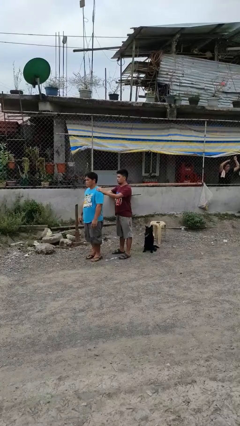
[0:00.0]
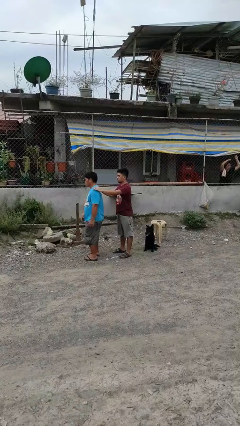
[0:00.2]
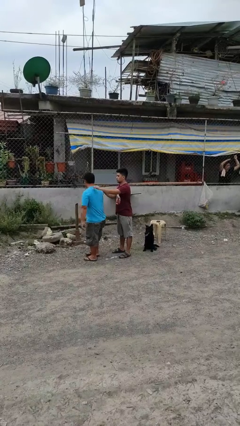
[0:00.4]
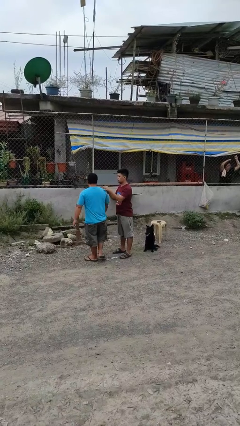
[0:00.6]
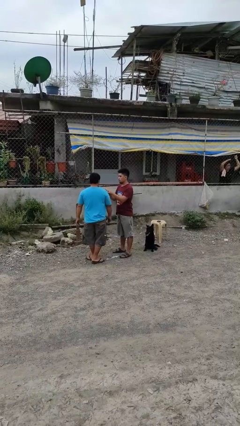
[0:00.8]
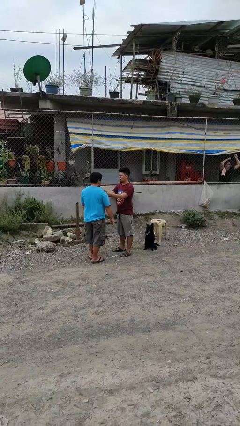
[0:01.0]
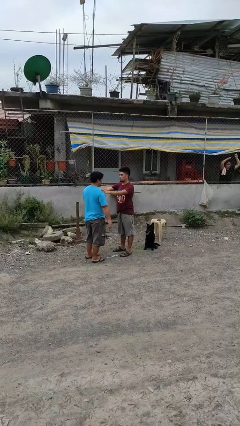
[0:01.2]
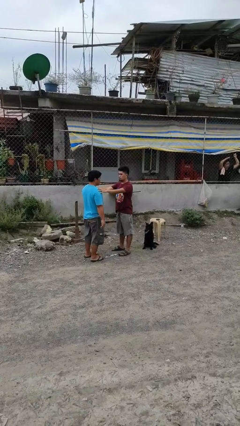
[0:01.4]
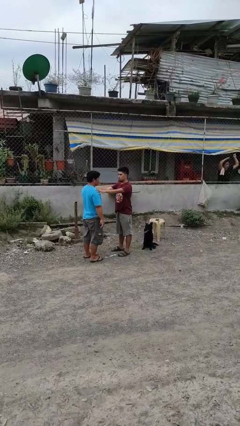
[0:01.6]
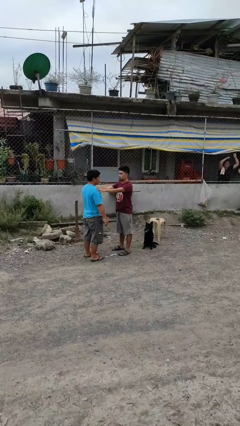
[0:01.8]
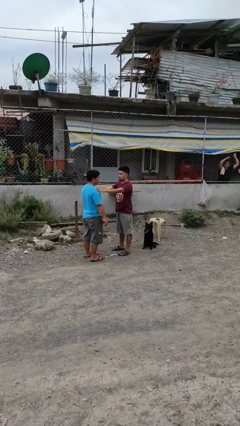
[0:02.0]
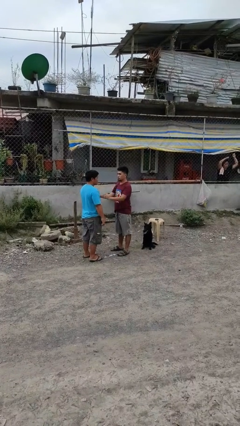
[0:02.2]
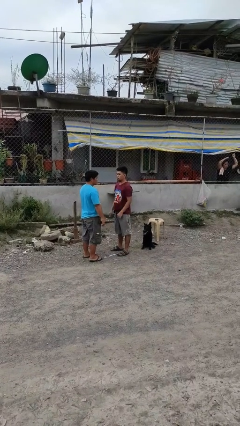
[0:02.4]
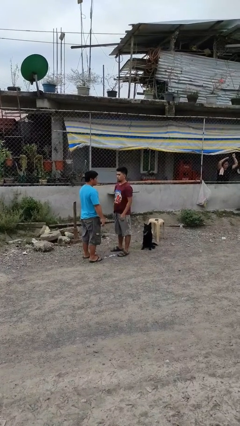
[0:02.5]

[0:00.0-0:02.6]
person spins person around

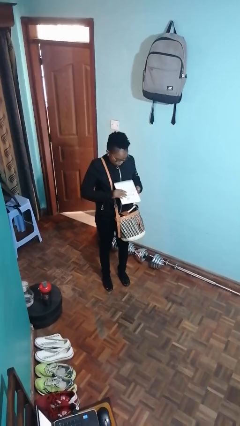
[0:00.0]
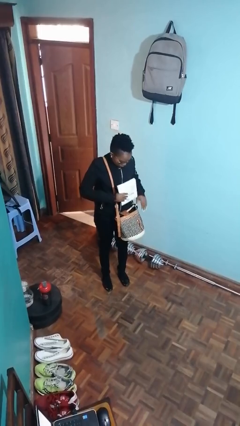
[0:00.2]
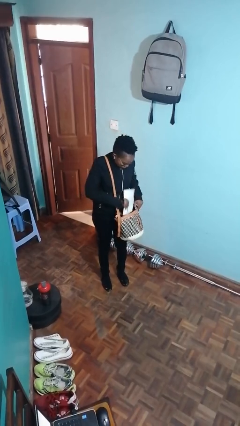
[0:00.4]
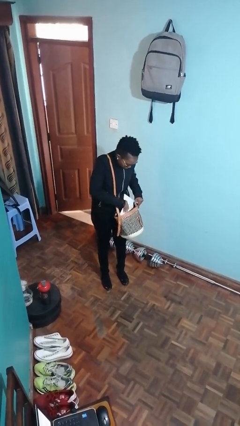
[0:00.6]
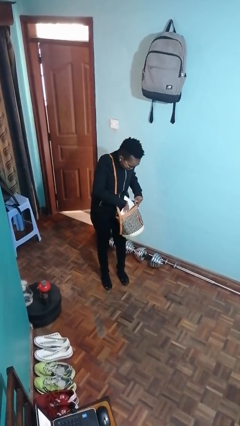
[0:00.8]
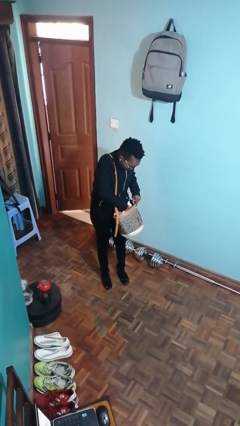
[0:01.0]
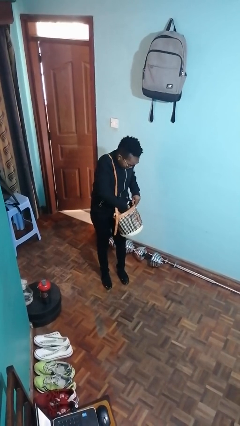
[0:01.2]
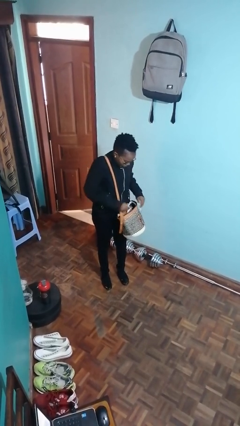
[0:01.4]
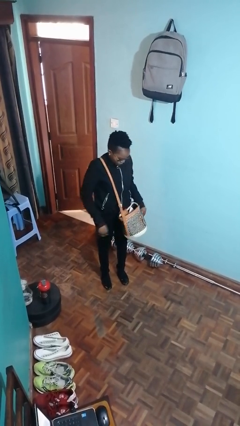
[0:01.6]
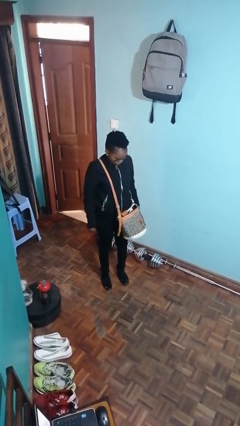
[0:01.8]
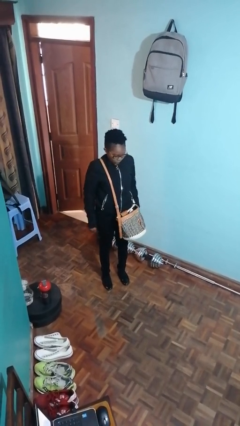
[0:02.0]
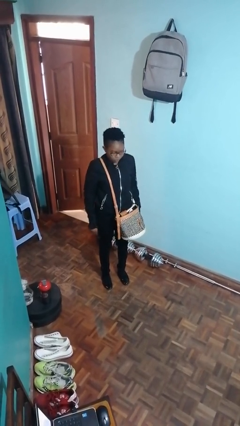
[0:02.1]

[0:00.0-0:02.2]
person puts object into purse

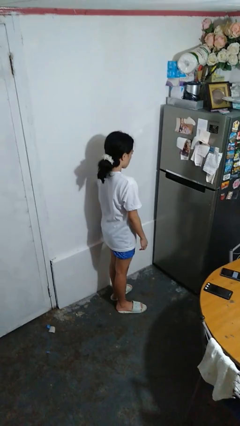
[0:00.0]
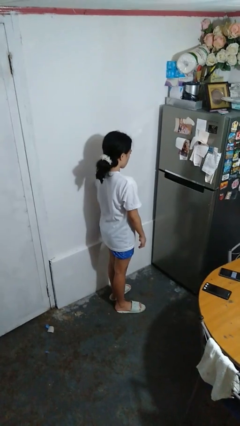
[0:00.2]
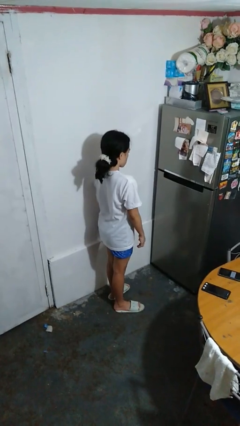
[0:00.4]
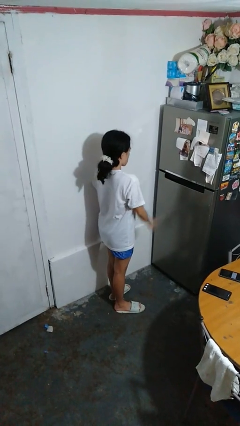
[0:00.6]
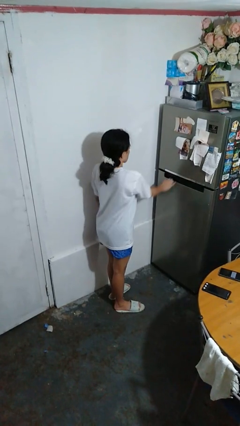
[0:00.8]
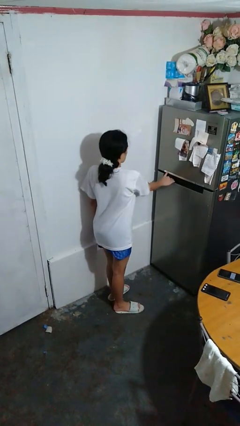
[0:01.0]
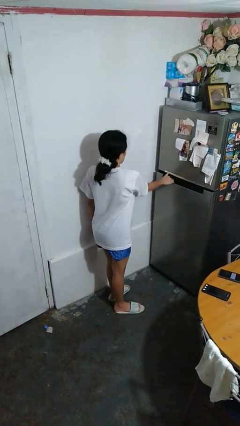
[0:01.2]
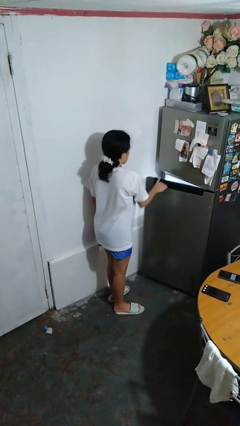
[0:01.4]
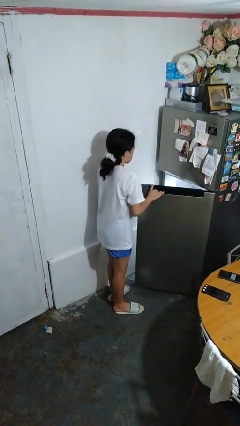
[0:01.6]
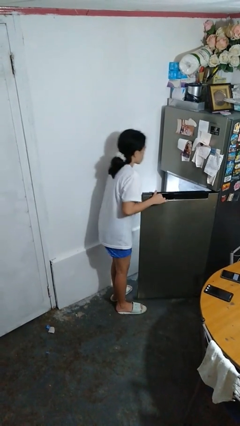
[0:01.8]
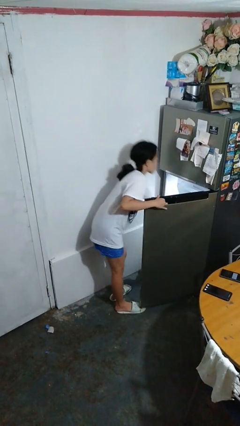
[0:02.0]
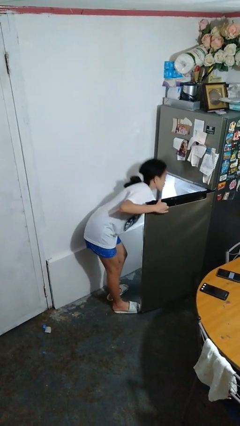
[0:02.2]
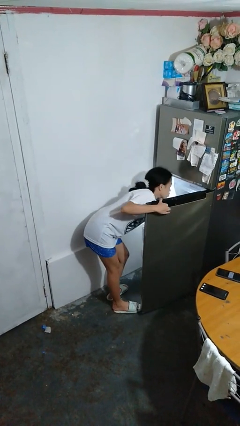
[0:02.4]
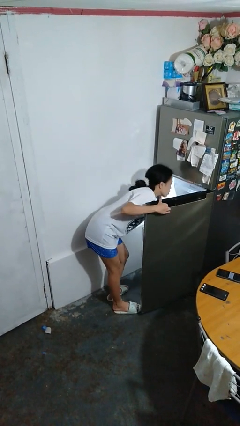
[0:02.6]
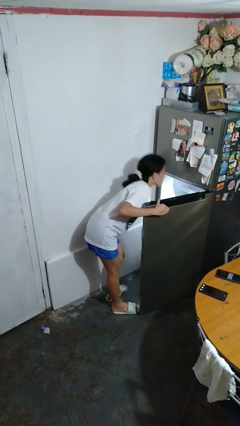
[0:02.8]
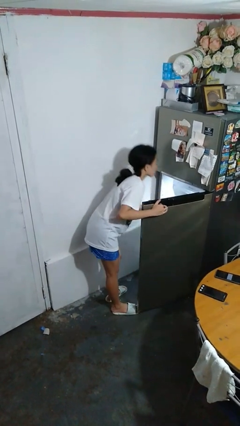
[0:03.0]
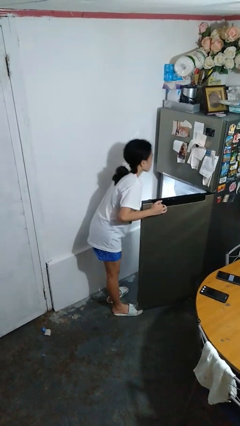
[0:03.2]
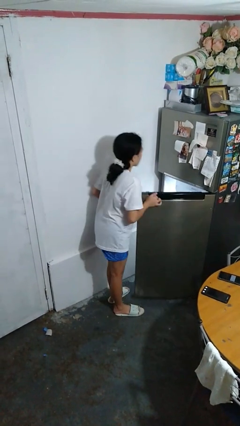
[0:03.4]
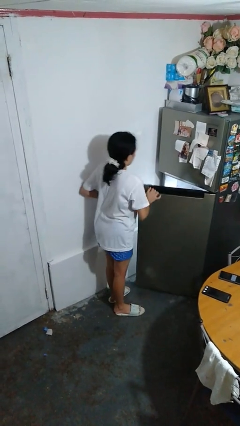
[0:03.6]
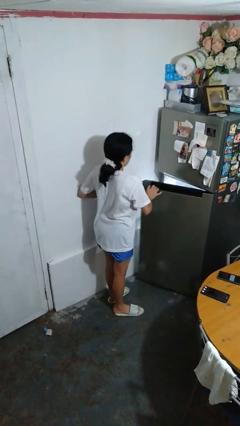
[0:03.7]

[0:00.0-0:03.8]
person takes object from refrigerator

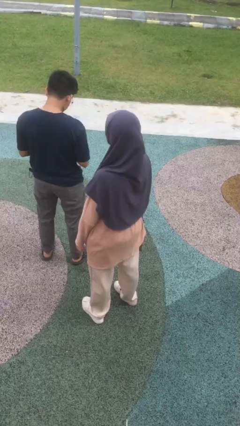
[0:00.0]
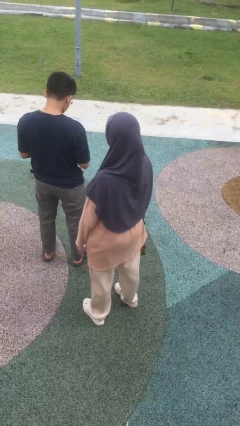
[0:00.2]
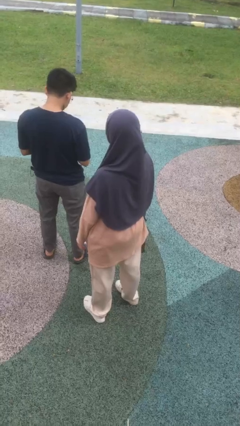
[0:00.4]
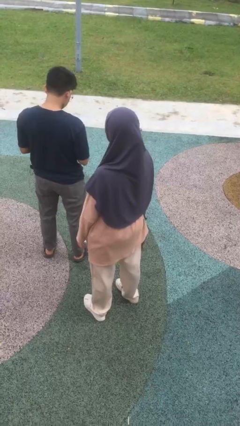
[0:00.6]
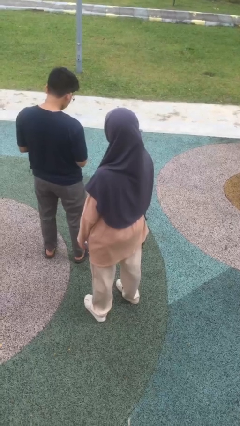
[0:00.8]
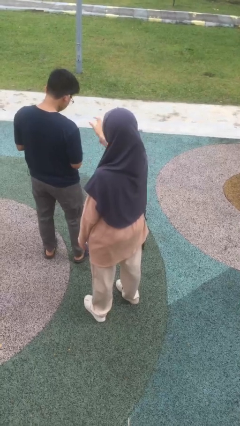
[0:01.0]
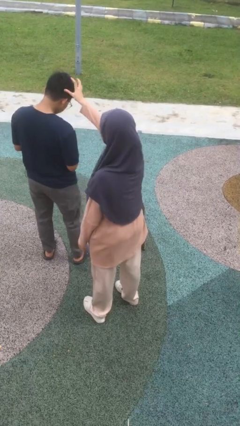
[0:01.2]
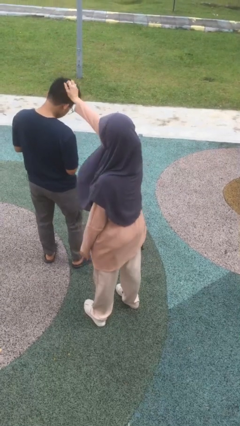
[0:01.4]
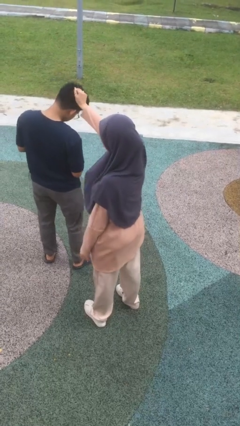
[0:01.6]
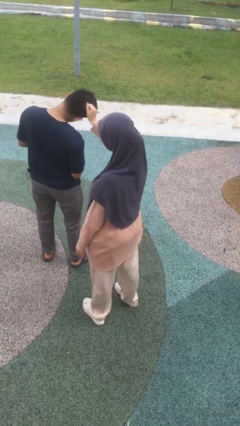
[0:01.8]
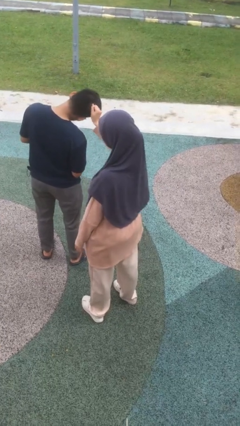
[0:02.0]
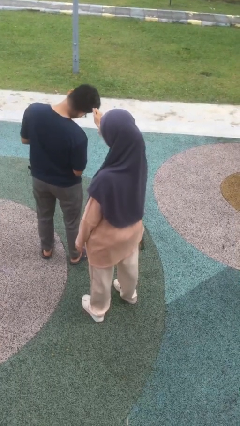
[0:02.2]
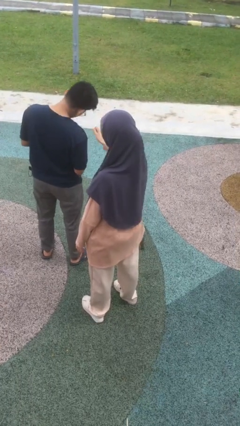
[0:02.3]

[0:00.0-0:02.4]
person grabs person by hair

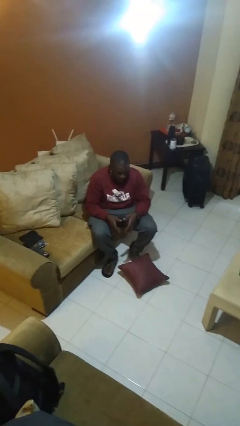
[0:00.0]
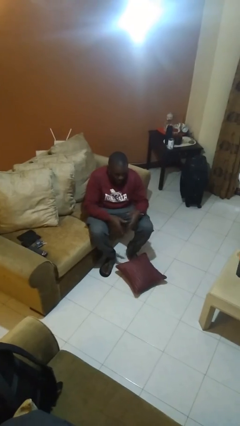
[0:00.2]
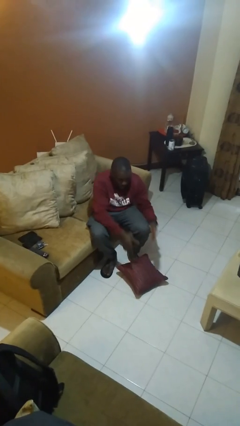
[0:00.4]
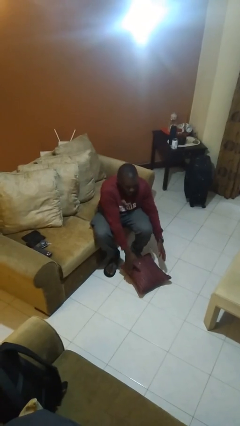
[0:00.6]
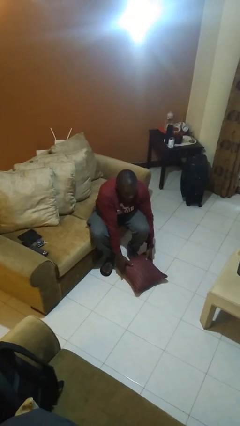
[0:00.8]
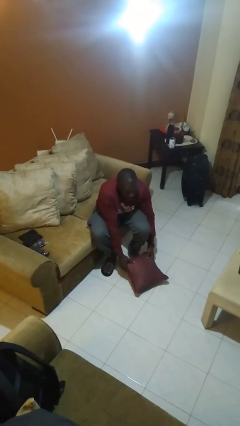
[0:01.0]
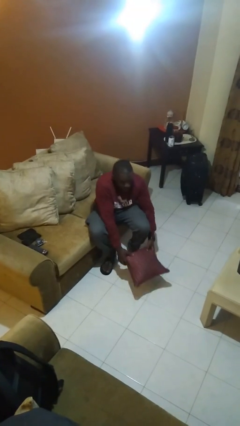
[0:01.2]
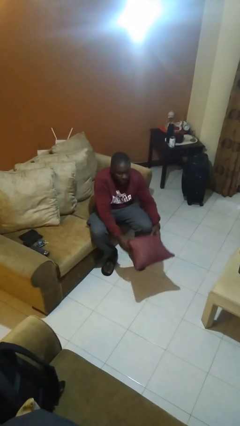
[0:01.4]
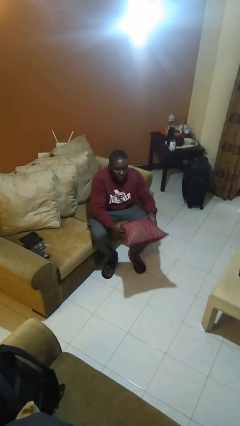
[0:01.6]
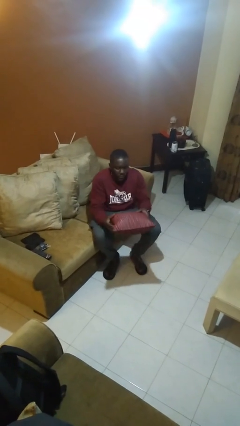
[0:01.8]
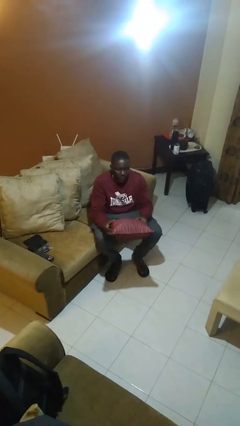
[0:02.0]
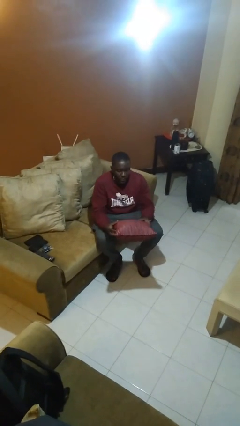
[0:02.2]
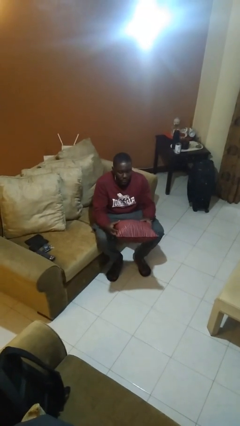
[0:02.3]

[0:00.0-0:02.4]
person picks up object from floor

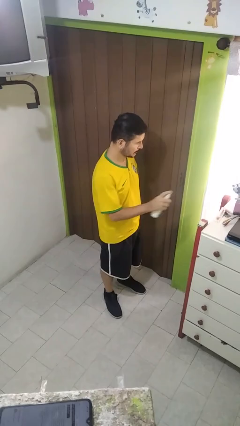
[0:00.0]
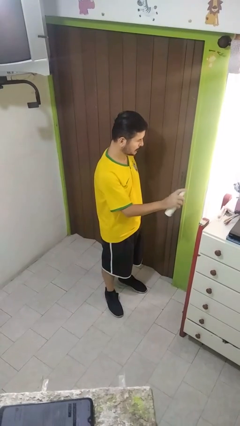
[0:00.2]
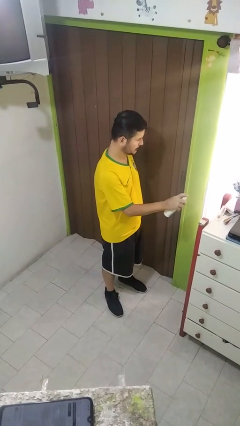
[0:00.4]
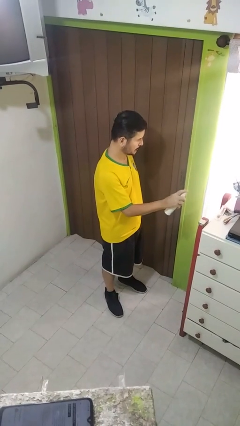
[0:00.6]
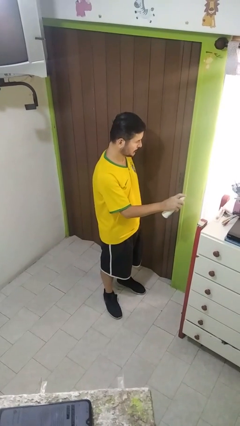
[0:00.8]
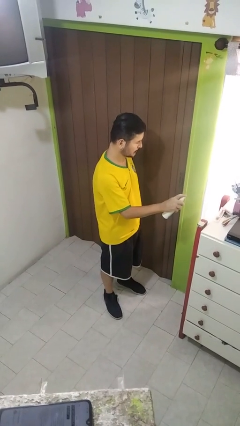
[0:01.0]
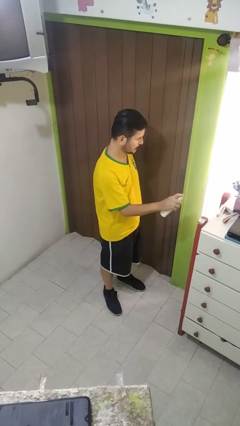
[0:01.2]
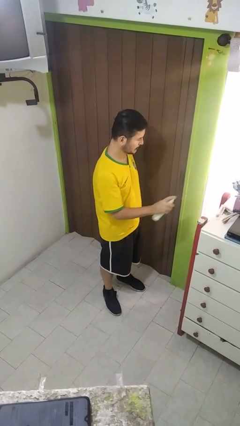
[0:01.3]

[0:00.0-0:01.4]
person sprays from bottle

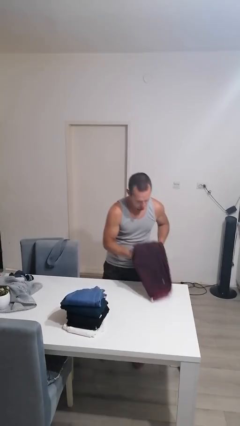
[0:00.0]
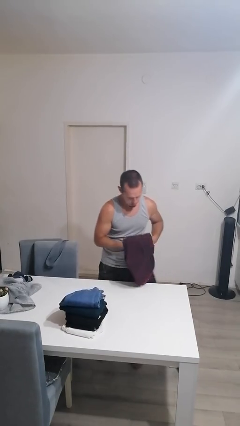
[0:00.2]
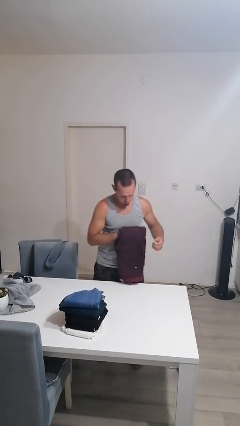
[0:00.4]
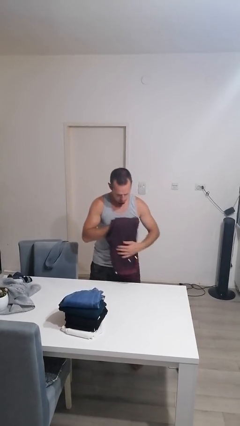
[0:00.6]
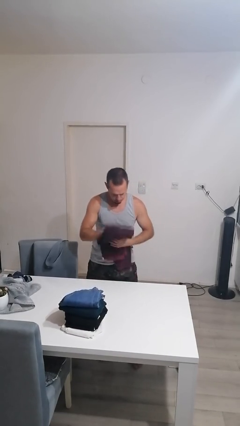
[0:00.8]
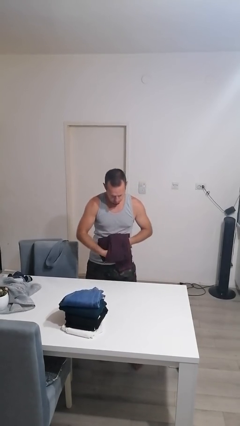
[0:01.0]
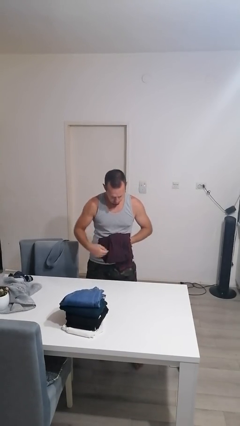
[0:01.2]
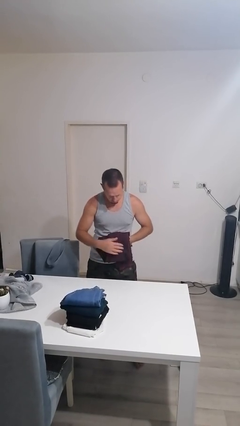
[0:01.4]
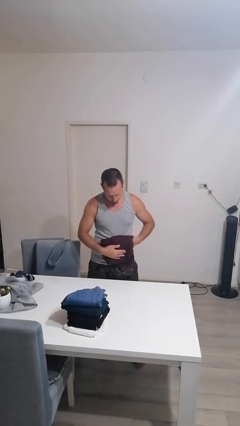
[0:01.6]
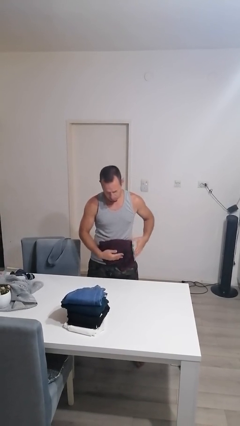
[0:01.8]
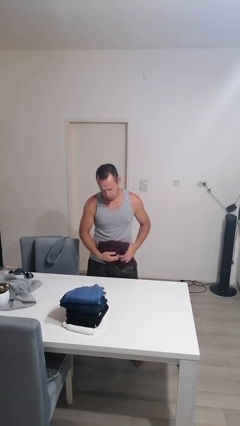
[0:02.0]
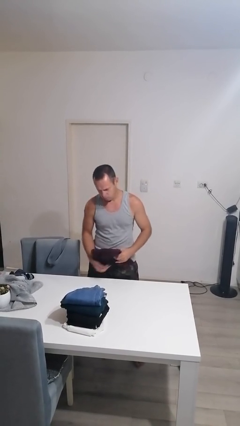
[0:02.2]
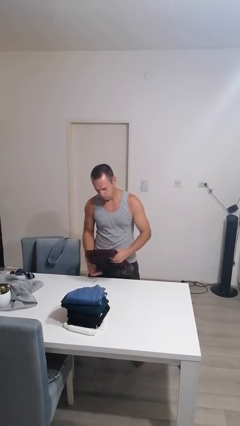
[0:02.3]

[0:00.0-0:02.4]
person folds pants
